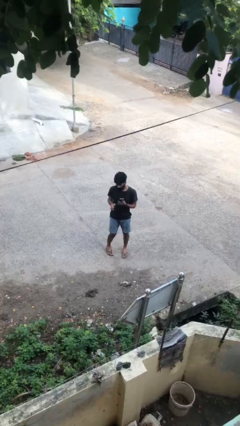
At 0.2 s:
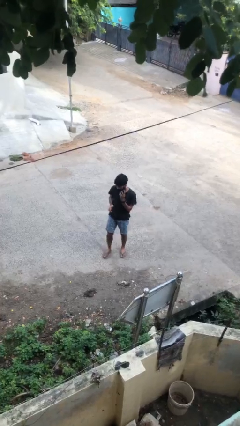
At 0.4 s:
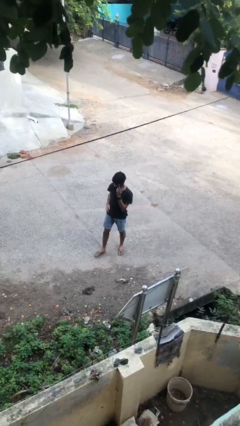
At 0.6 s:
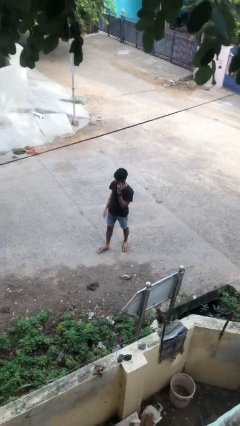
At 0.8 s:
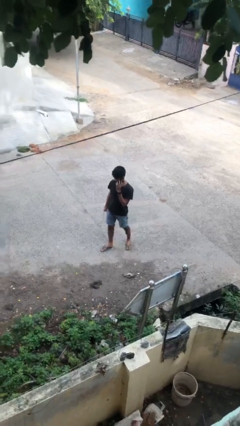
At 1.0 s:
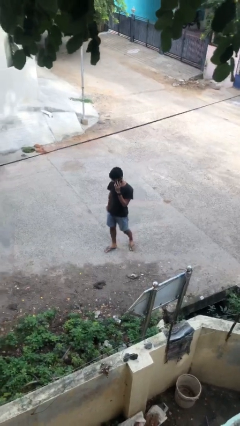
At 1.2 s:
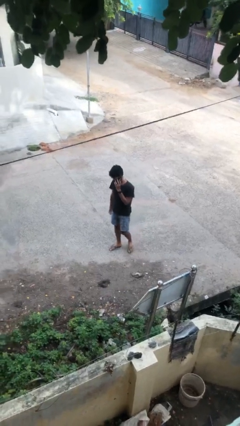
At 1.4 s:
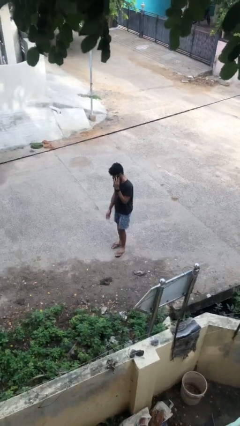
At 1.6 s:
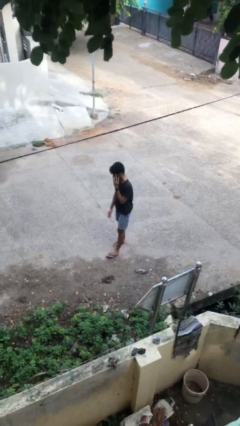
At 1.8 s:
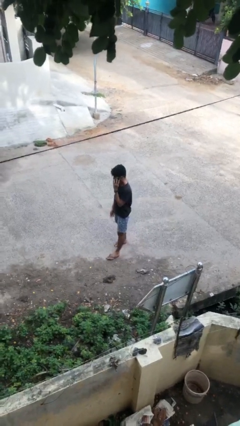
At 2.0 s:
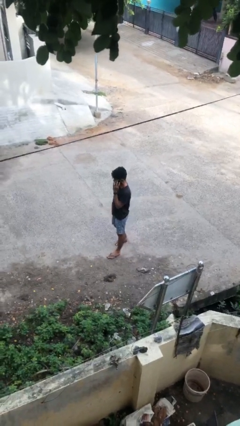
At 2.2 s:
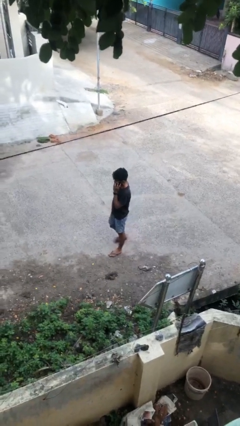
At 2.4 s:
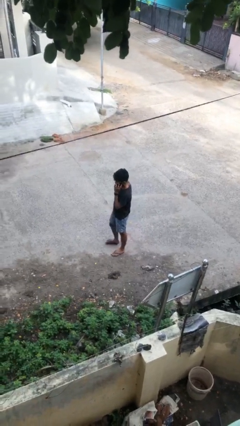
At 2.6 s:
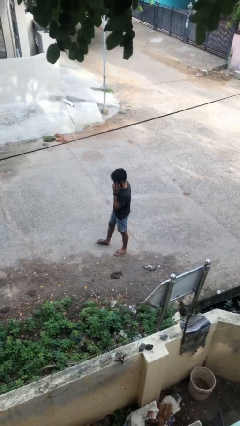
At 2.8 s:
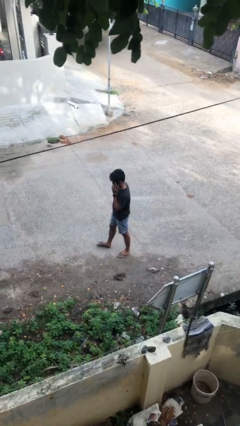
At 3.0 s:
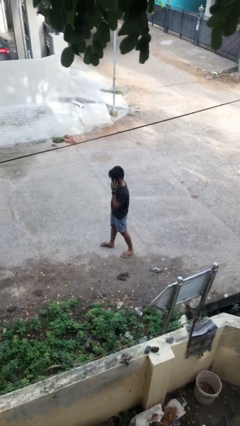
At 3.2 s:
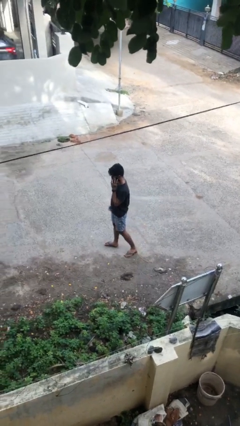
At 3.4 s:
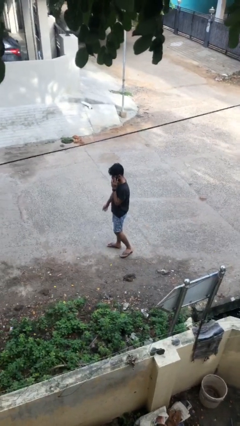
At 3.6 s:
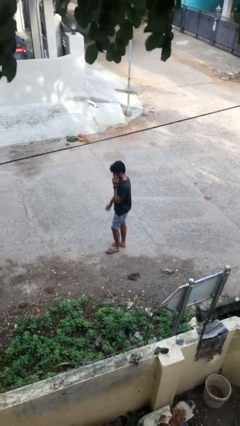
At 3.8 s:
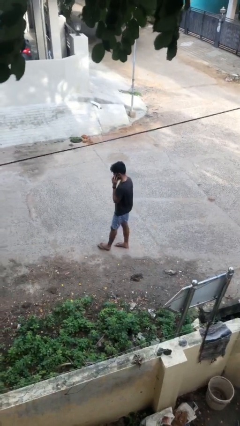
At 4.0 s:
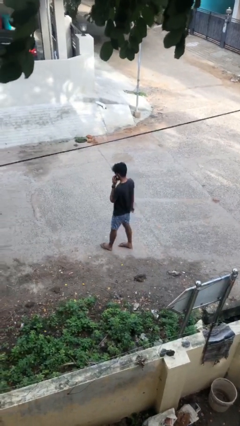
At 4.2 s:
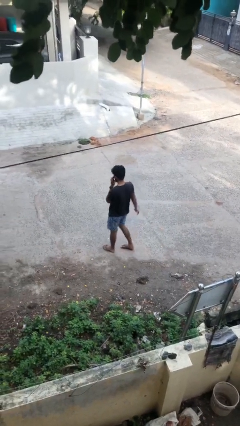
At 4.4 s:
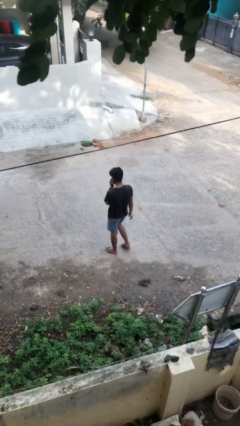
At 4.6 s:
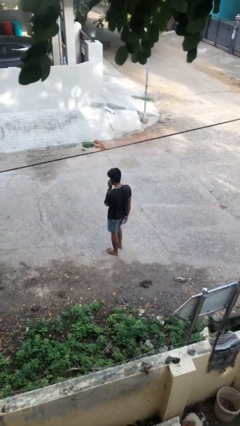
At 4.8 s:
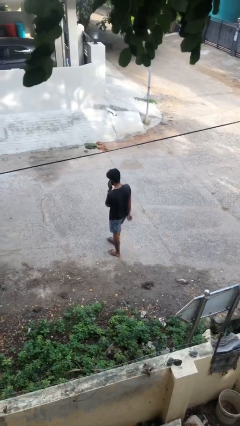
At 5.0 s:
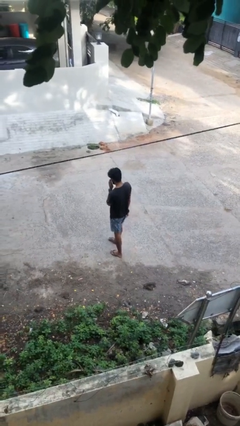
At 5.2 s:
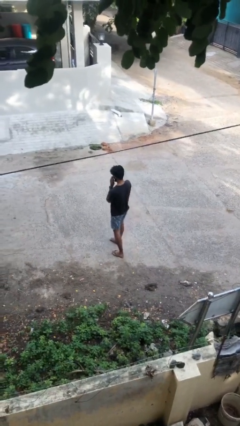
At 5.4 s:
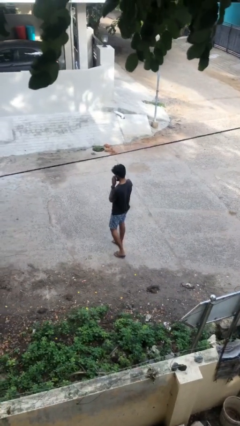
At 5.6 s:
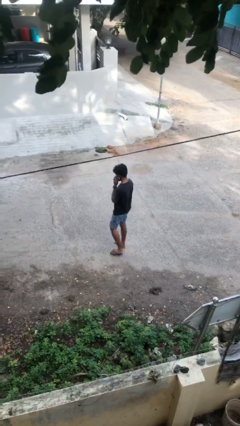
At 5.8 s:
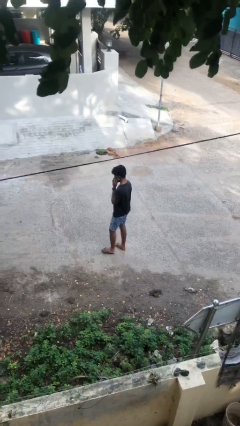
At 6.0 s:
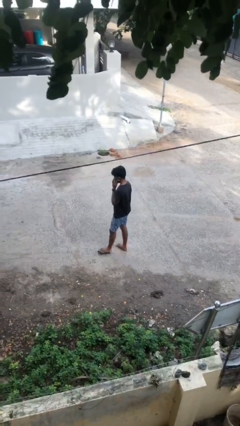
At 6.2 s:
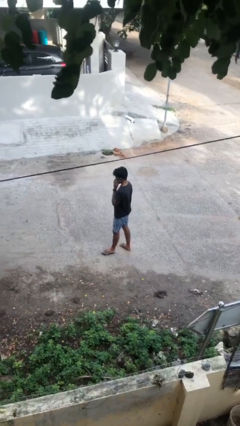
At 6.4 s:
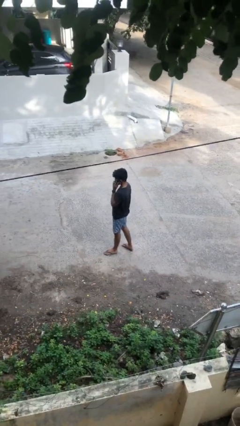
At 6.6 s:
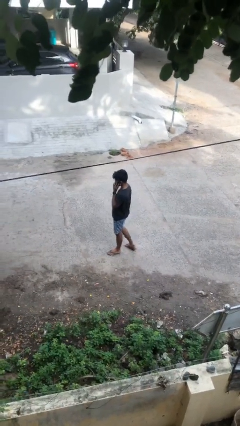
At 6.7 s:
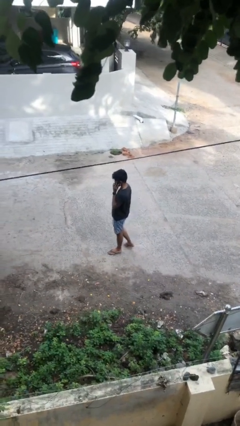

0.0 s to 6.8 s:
person talks on phone

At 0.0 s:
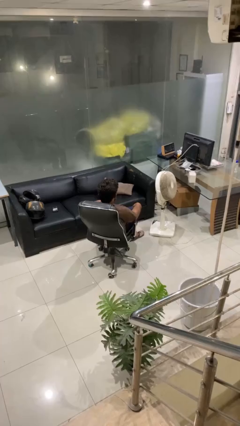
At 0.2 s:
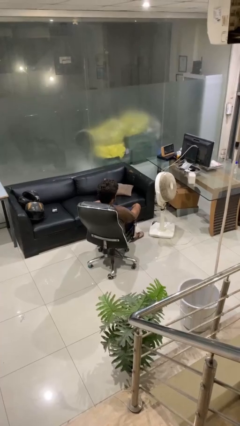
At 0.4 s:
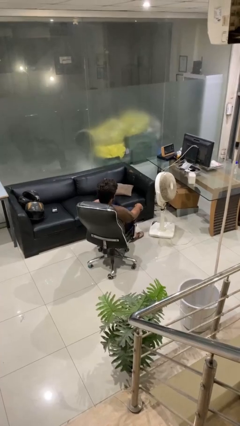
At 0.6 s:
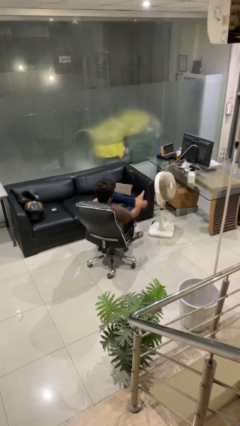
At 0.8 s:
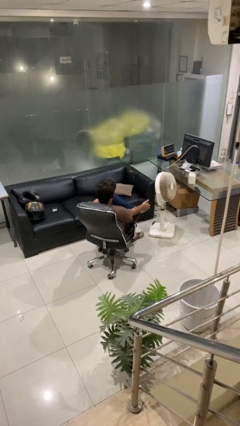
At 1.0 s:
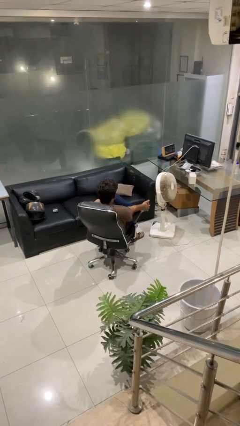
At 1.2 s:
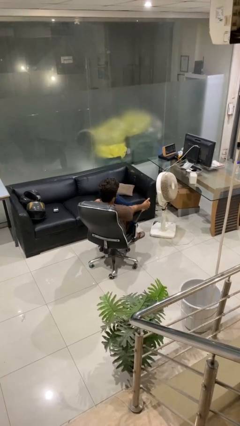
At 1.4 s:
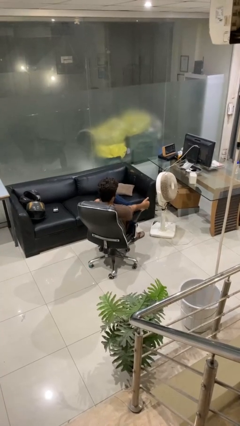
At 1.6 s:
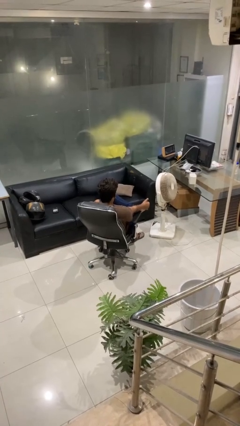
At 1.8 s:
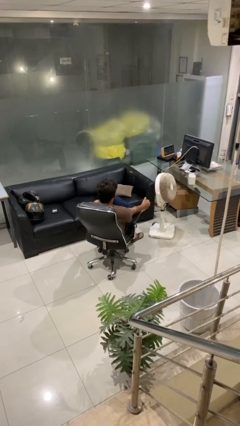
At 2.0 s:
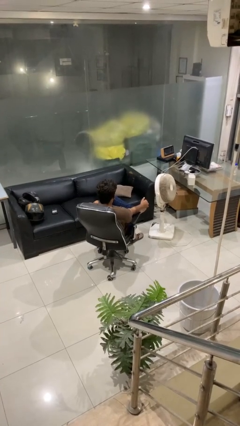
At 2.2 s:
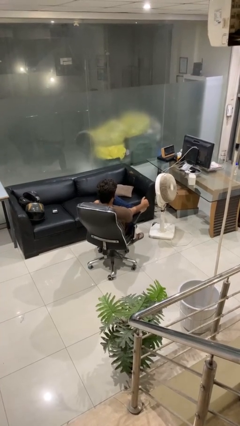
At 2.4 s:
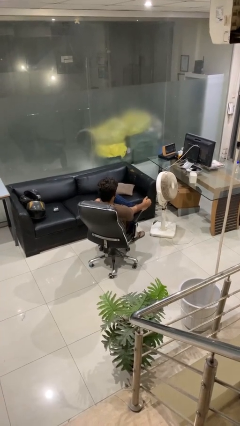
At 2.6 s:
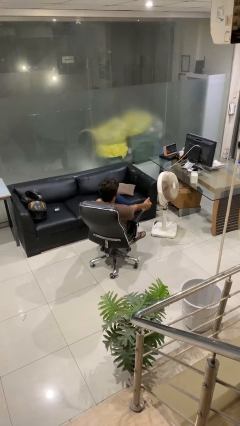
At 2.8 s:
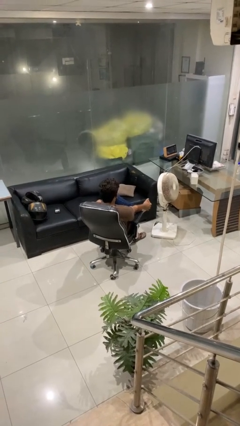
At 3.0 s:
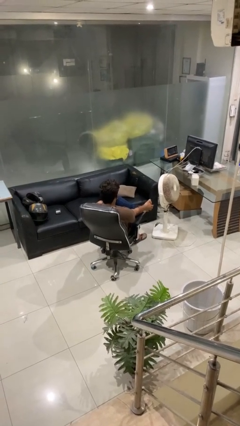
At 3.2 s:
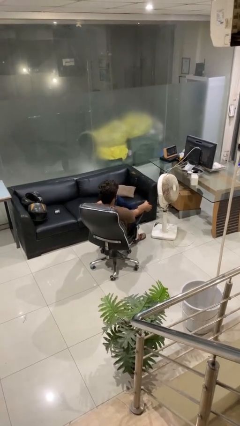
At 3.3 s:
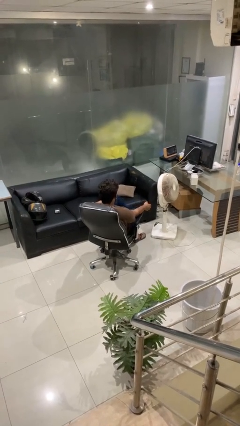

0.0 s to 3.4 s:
person rubs foot

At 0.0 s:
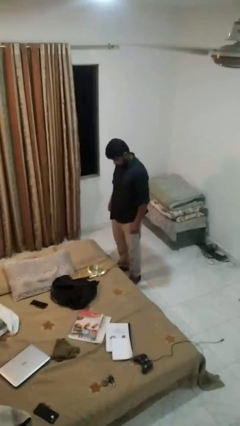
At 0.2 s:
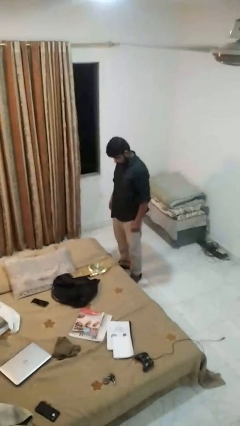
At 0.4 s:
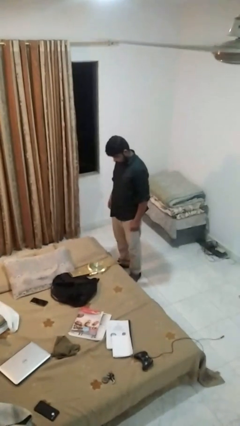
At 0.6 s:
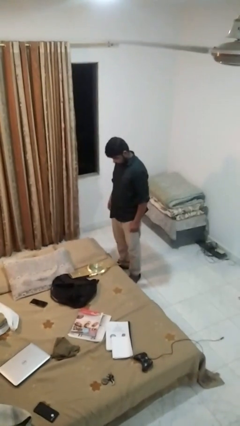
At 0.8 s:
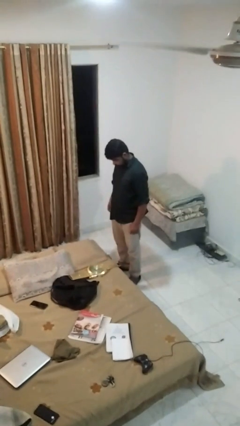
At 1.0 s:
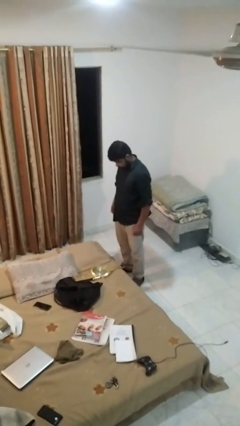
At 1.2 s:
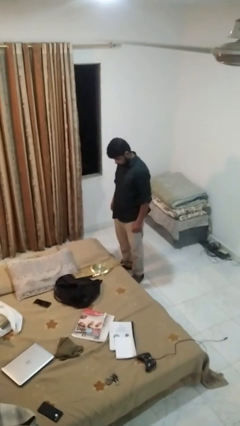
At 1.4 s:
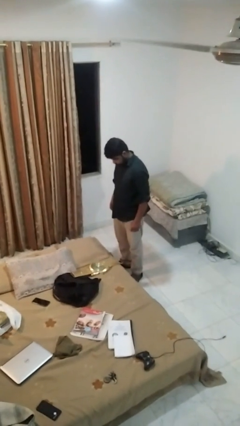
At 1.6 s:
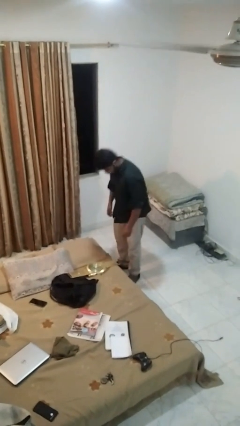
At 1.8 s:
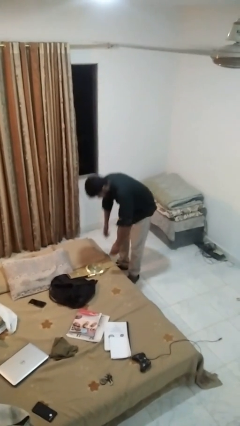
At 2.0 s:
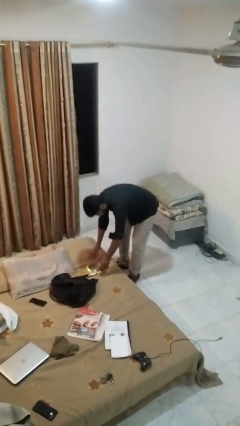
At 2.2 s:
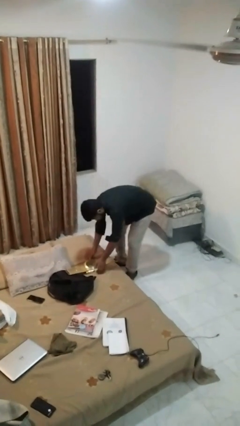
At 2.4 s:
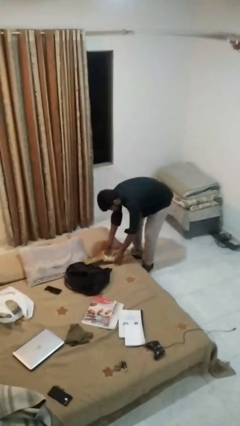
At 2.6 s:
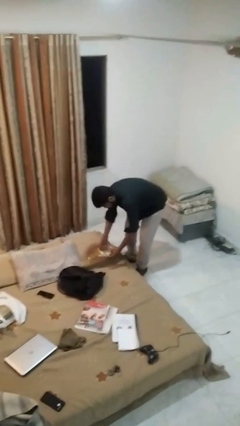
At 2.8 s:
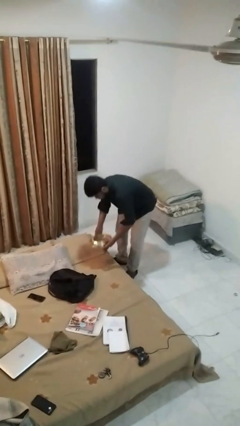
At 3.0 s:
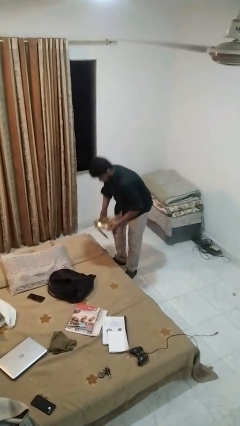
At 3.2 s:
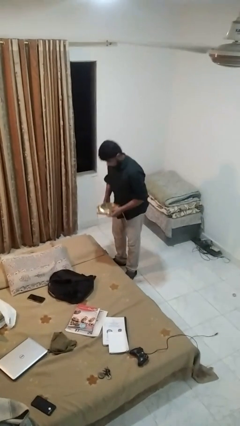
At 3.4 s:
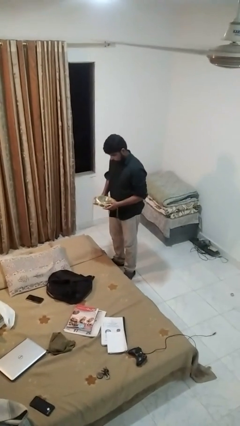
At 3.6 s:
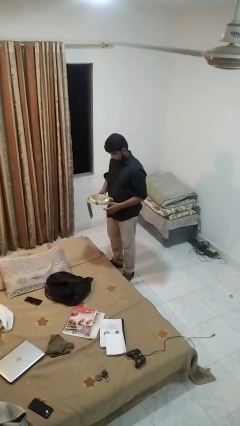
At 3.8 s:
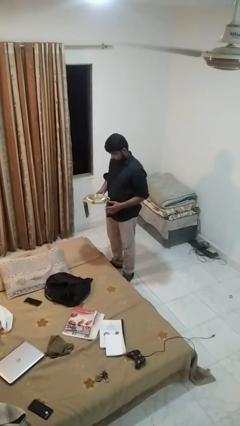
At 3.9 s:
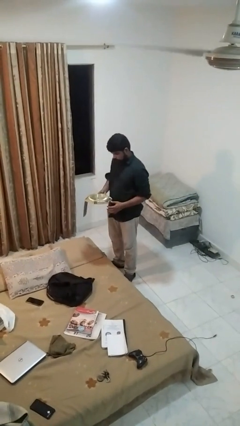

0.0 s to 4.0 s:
person picks up object from bed

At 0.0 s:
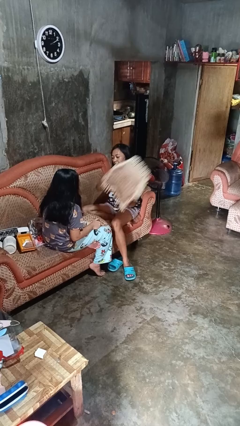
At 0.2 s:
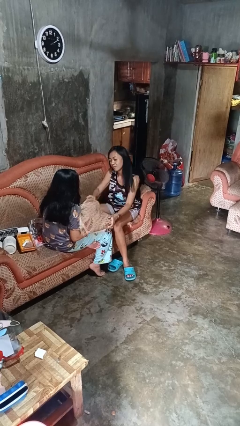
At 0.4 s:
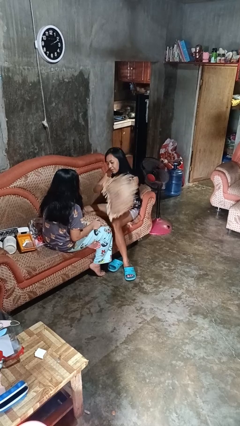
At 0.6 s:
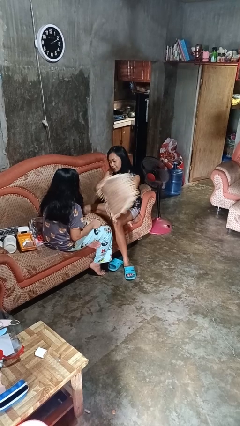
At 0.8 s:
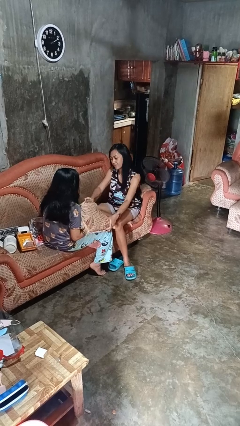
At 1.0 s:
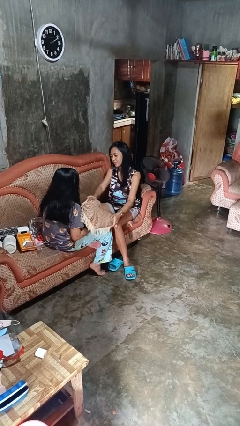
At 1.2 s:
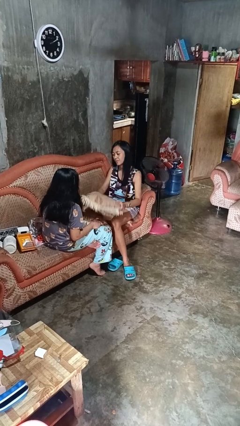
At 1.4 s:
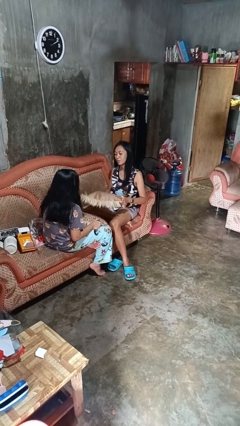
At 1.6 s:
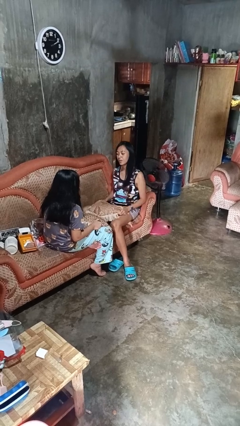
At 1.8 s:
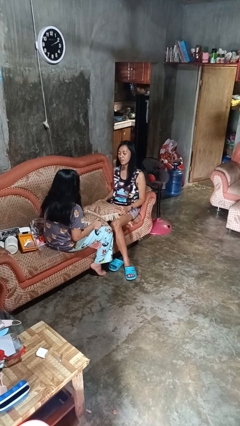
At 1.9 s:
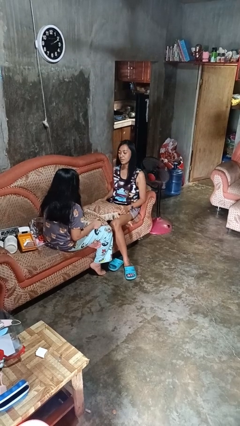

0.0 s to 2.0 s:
person hits person with pillow

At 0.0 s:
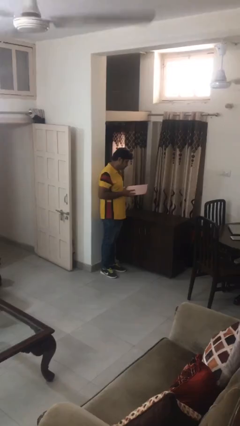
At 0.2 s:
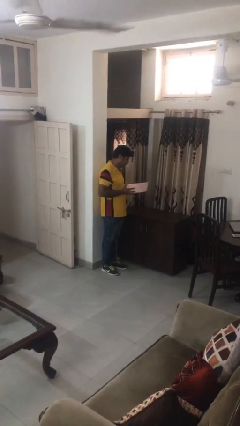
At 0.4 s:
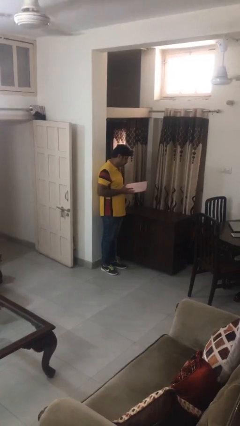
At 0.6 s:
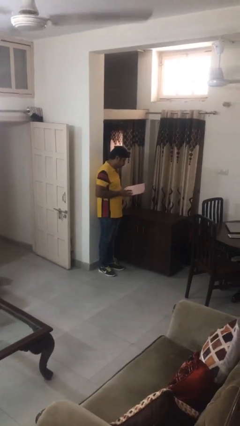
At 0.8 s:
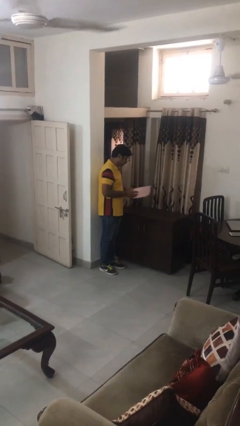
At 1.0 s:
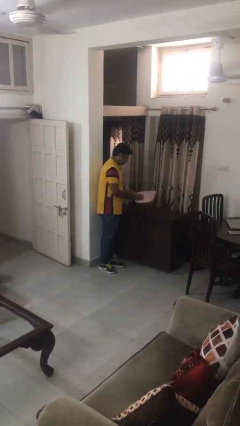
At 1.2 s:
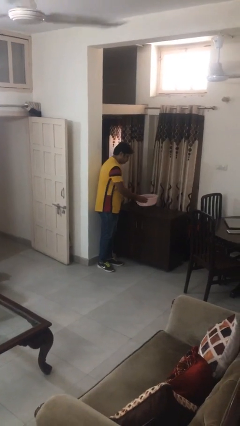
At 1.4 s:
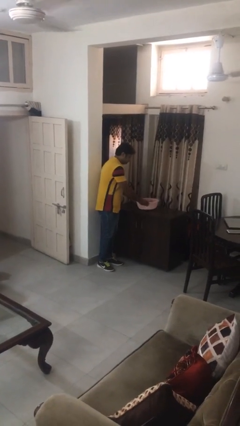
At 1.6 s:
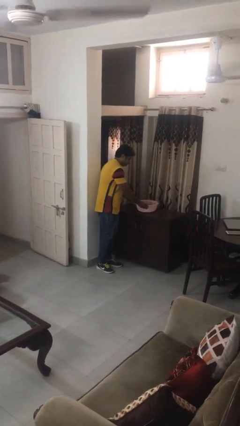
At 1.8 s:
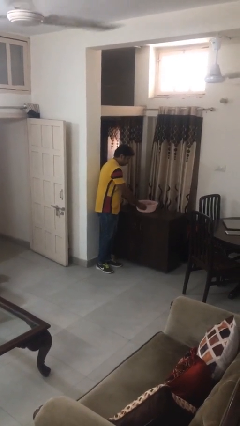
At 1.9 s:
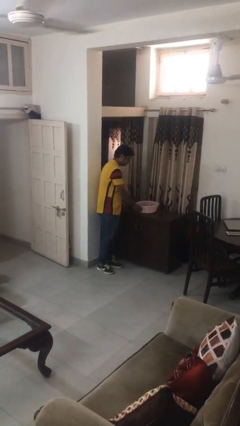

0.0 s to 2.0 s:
person puts down object on countertop
